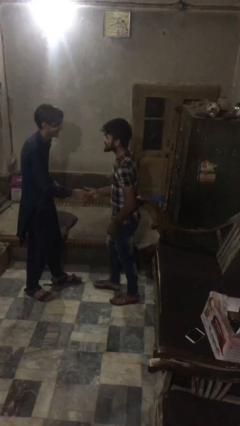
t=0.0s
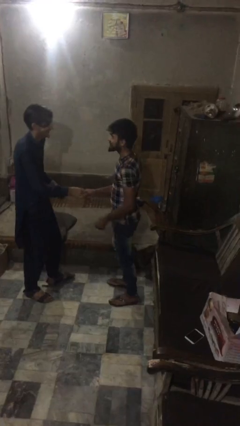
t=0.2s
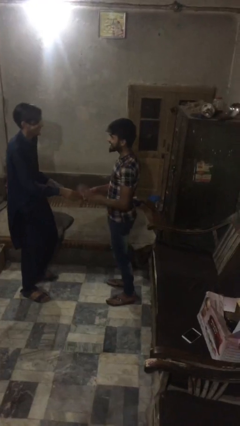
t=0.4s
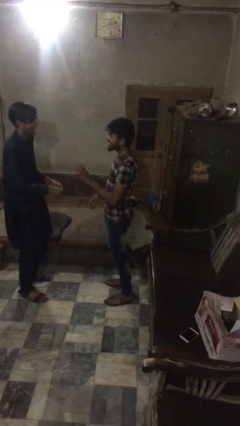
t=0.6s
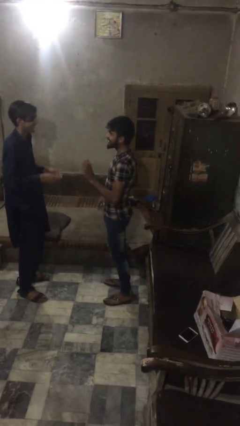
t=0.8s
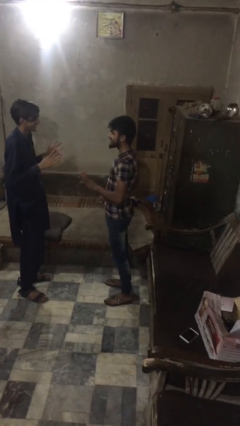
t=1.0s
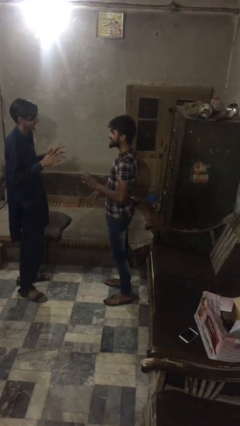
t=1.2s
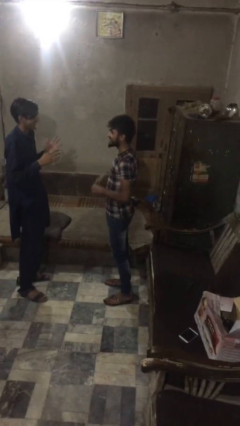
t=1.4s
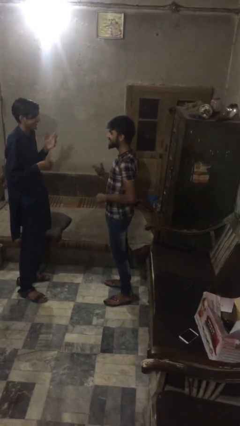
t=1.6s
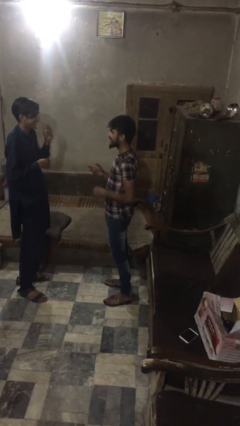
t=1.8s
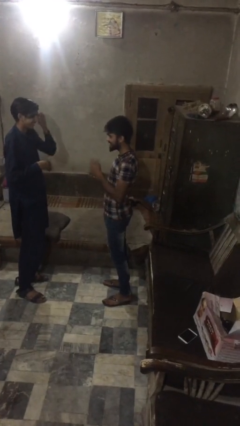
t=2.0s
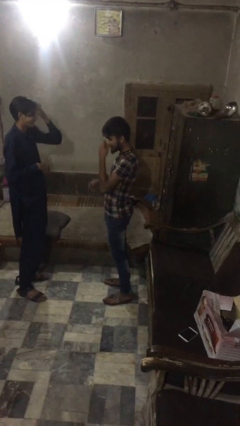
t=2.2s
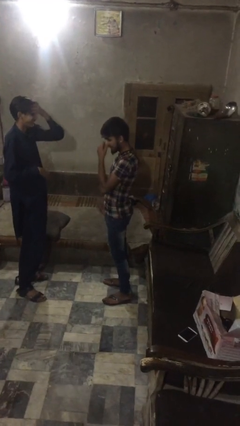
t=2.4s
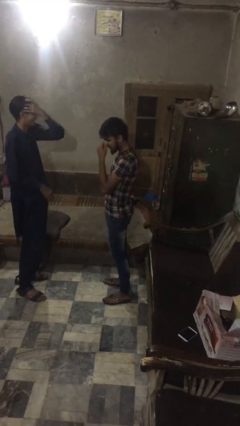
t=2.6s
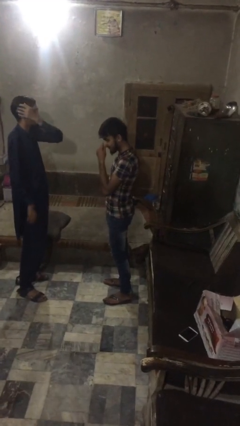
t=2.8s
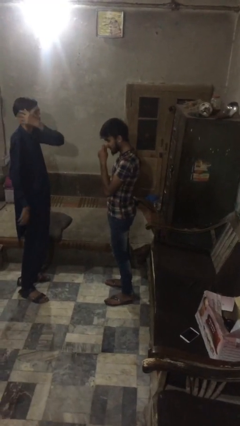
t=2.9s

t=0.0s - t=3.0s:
person talks to person

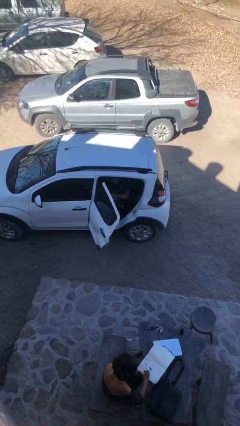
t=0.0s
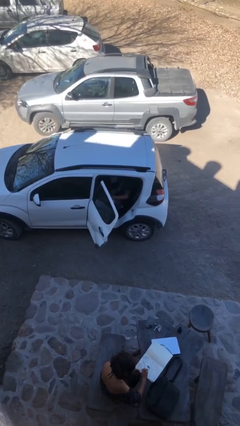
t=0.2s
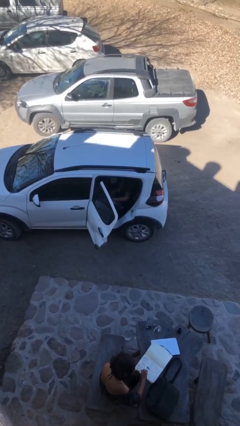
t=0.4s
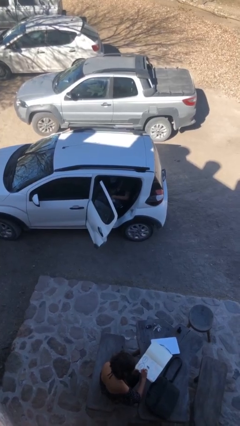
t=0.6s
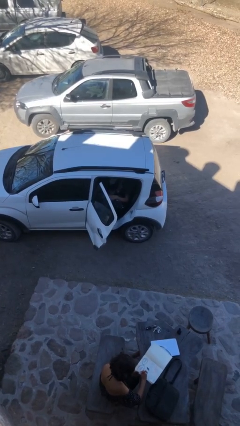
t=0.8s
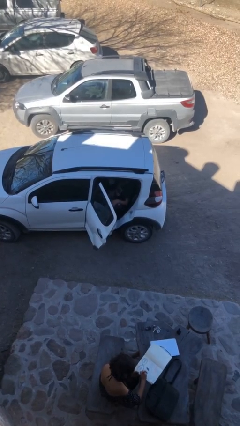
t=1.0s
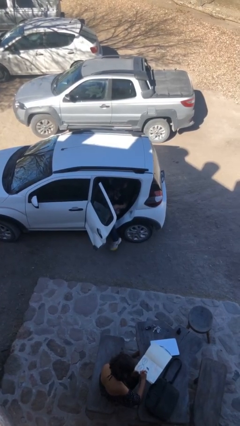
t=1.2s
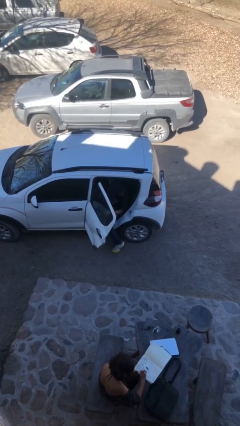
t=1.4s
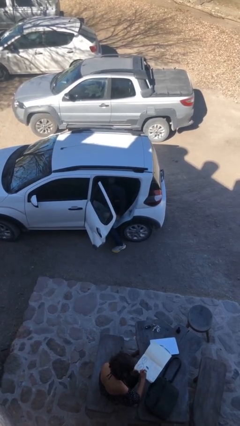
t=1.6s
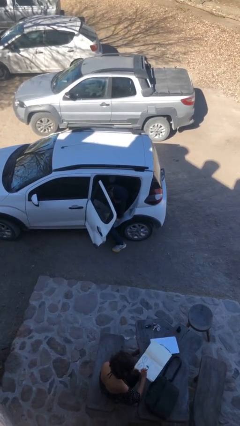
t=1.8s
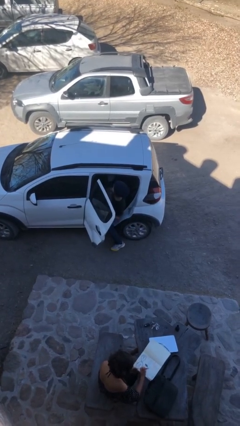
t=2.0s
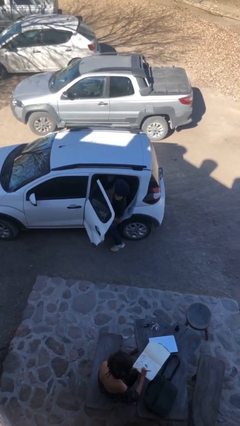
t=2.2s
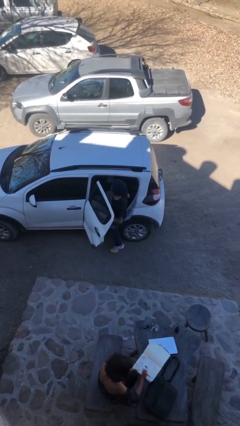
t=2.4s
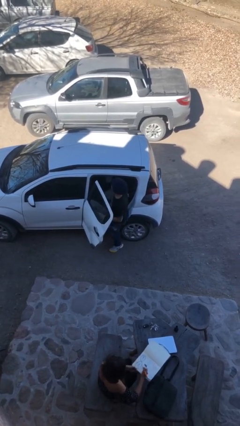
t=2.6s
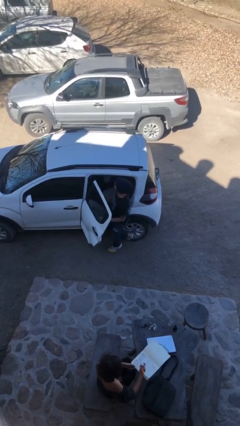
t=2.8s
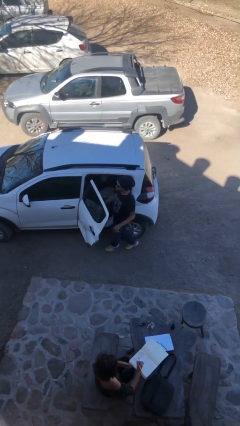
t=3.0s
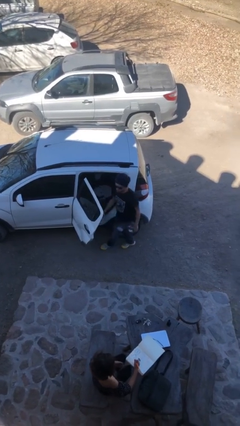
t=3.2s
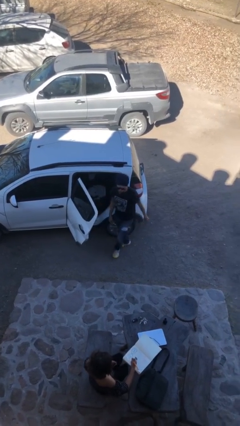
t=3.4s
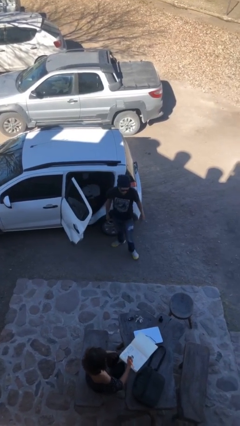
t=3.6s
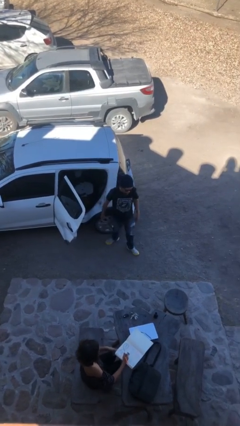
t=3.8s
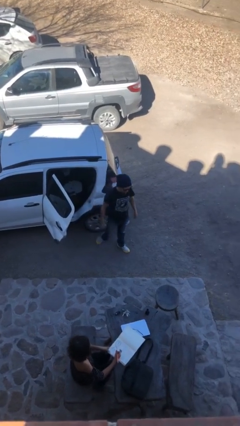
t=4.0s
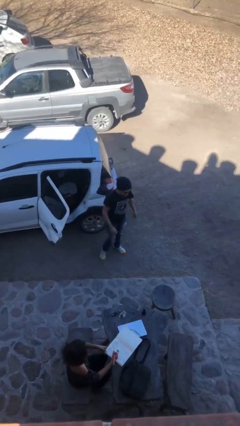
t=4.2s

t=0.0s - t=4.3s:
person exits car

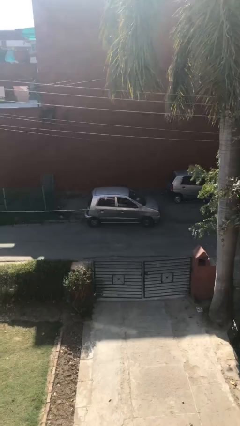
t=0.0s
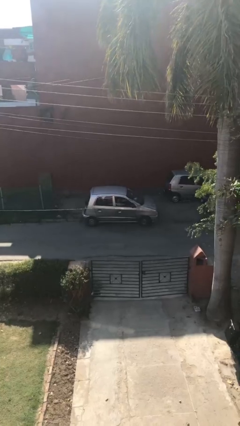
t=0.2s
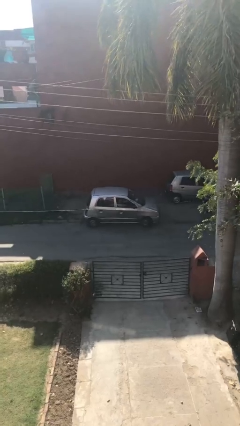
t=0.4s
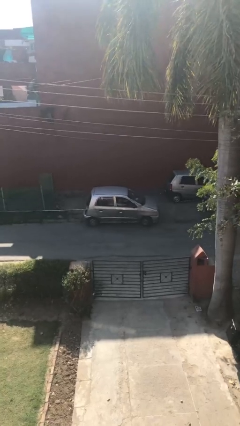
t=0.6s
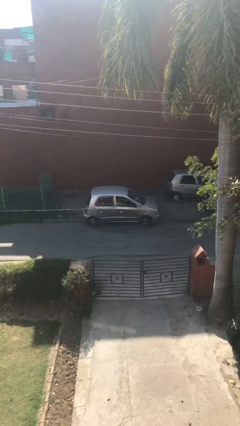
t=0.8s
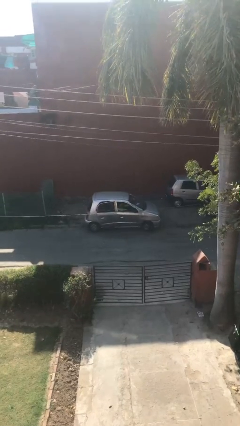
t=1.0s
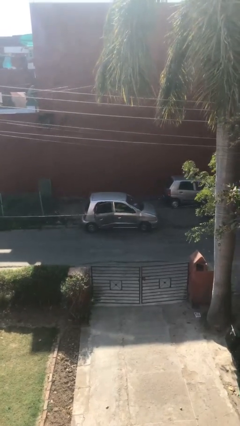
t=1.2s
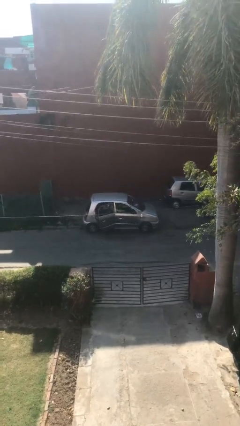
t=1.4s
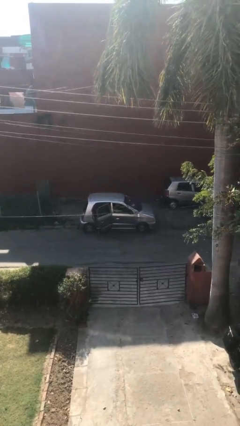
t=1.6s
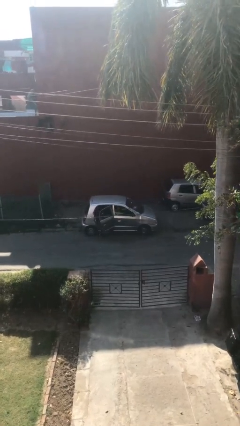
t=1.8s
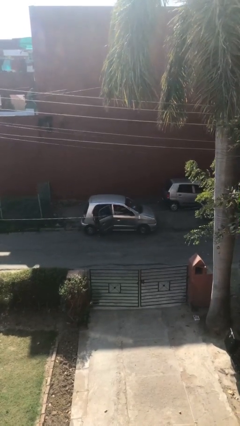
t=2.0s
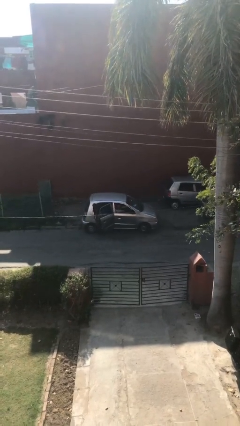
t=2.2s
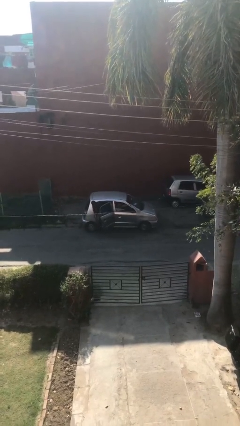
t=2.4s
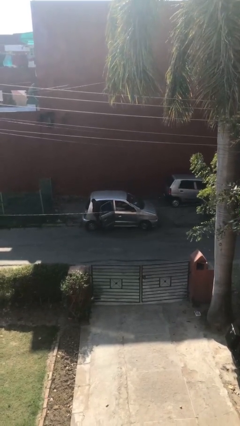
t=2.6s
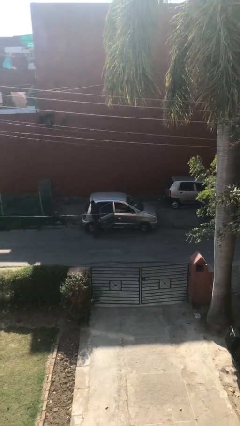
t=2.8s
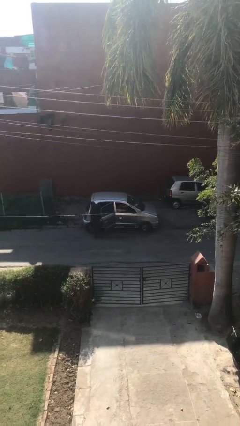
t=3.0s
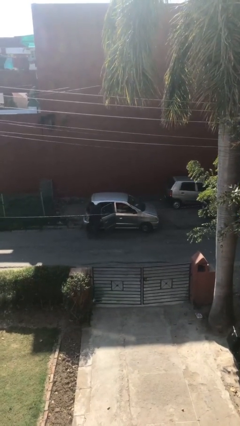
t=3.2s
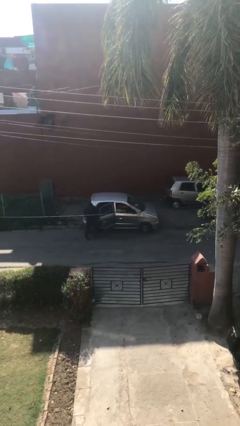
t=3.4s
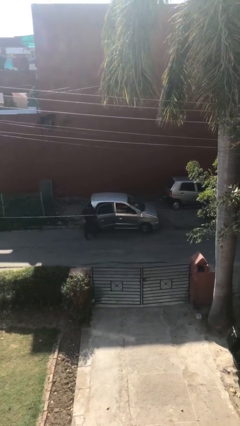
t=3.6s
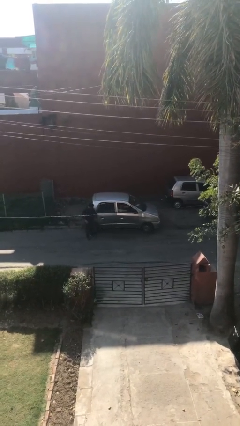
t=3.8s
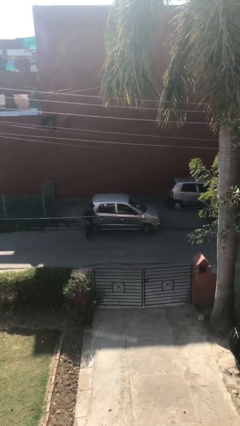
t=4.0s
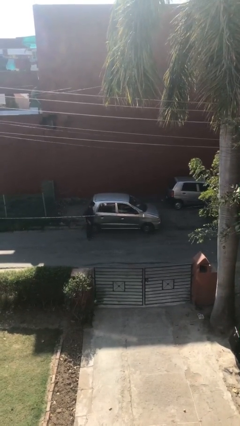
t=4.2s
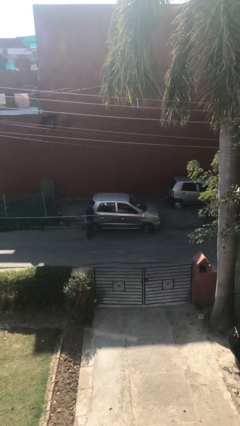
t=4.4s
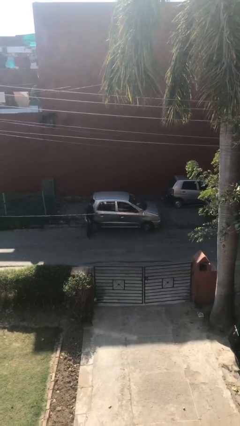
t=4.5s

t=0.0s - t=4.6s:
car drops off person

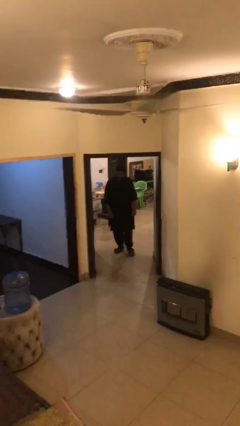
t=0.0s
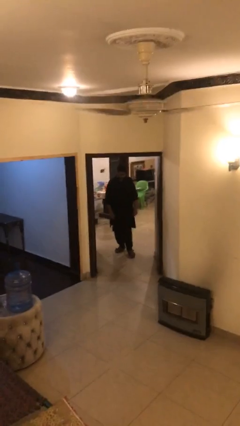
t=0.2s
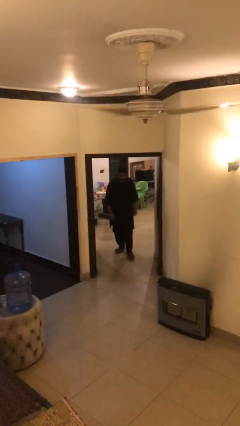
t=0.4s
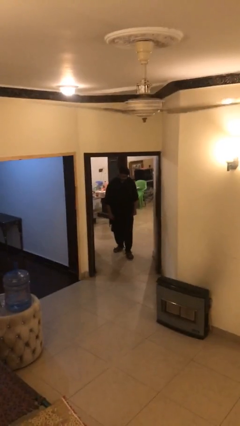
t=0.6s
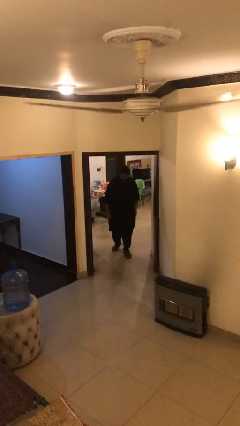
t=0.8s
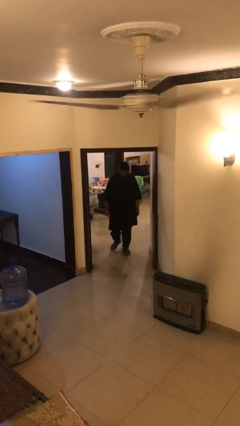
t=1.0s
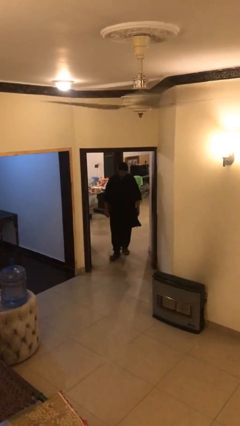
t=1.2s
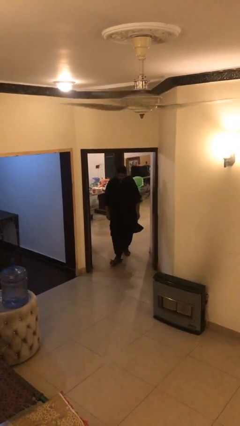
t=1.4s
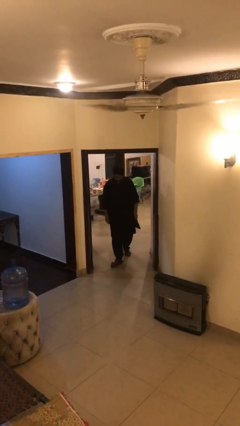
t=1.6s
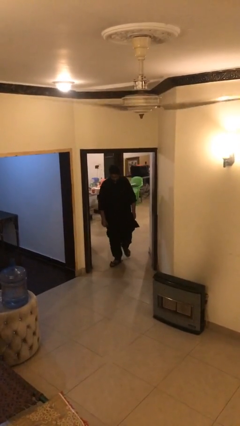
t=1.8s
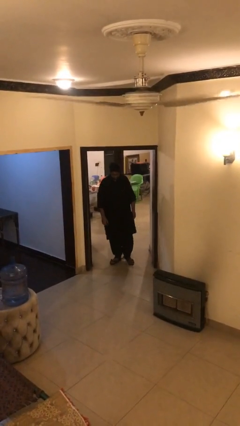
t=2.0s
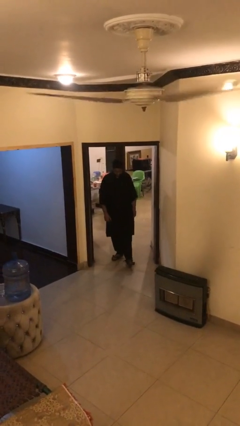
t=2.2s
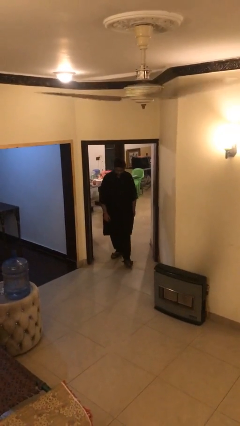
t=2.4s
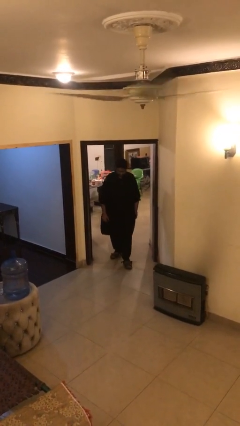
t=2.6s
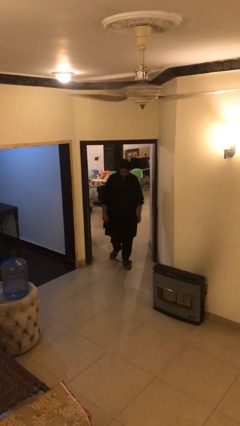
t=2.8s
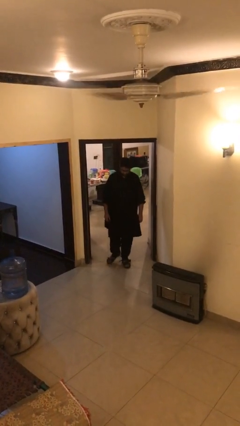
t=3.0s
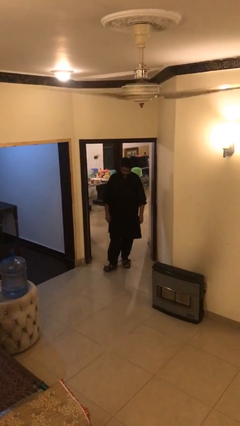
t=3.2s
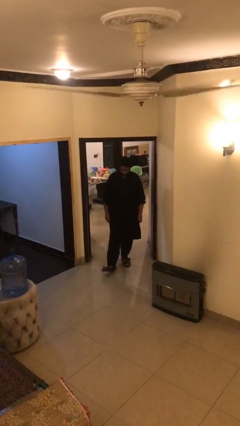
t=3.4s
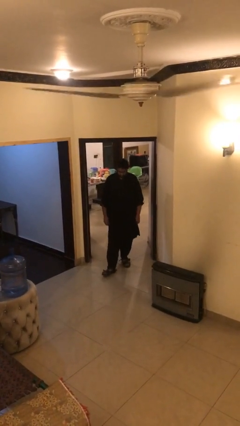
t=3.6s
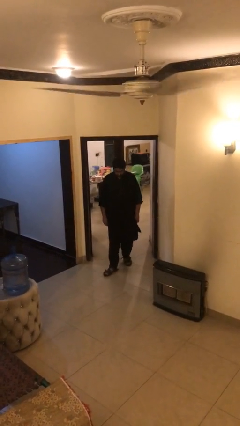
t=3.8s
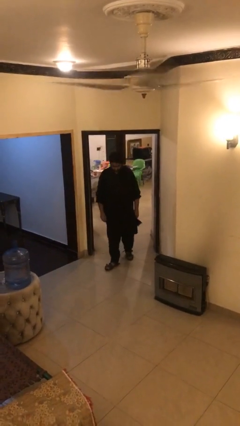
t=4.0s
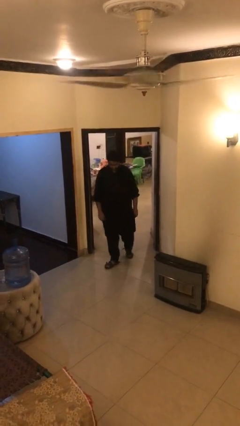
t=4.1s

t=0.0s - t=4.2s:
person enters scene through structure

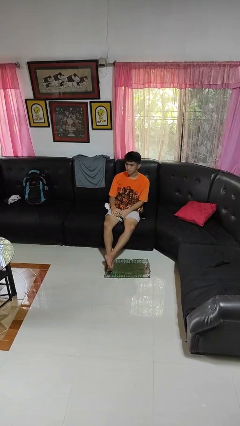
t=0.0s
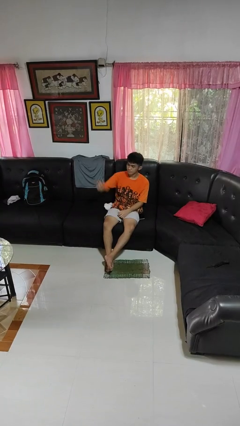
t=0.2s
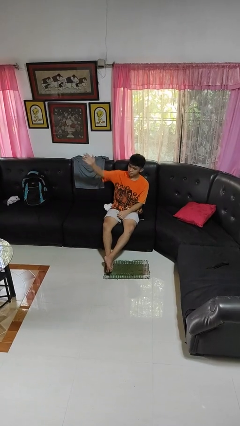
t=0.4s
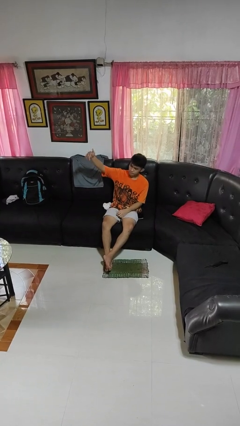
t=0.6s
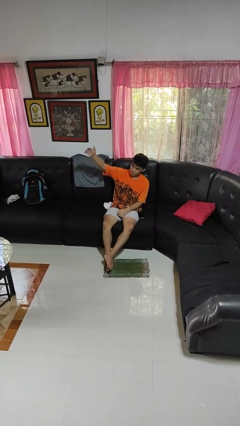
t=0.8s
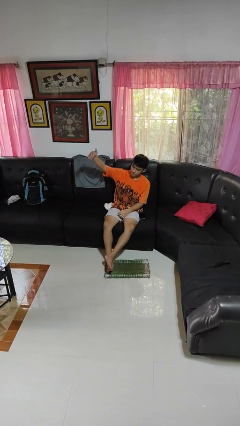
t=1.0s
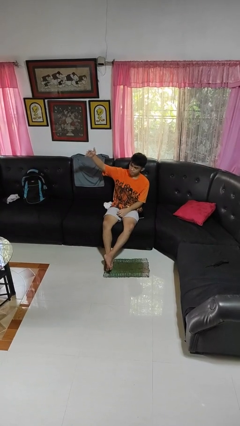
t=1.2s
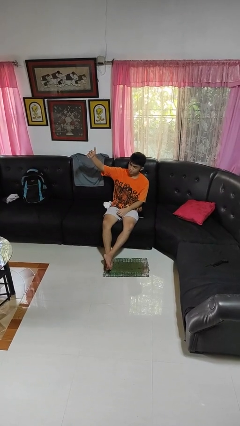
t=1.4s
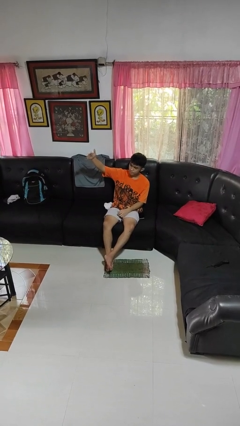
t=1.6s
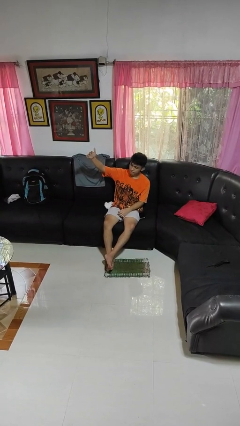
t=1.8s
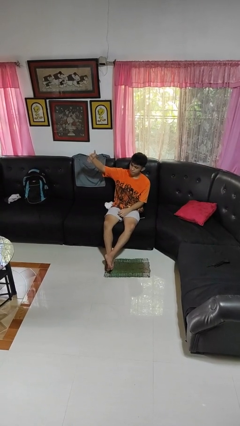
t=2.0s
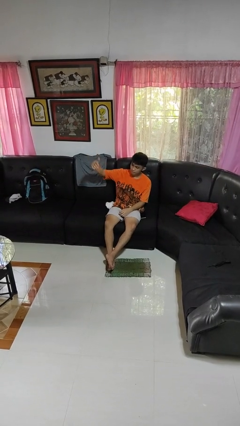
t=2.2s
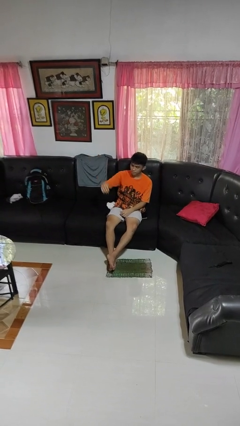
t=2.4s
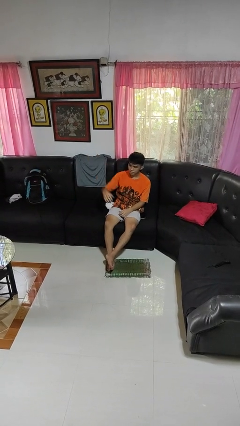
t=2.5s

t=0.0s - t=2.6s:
person gestures come here
